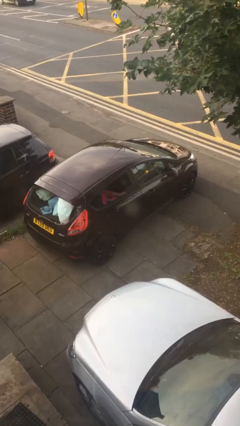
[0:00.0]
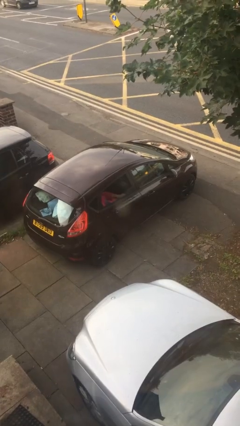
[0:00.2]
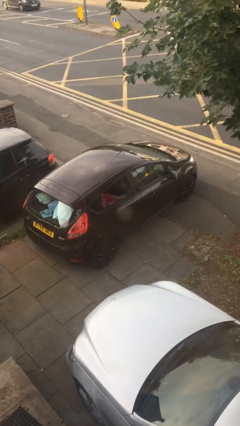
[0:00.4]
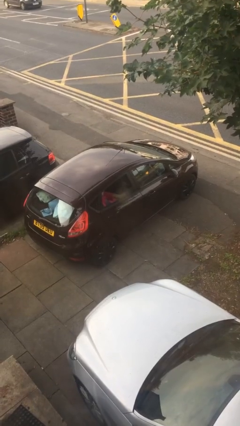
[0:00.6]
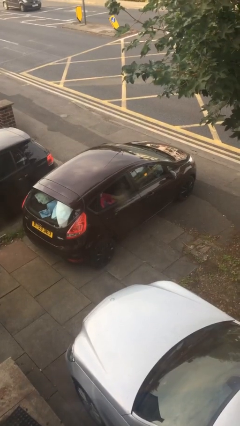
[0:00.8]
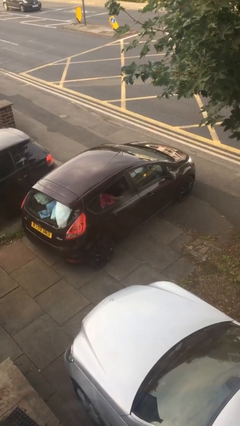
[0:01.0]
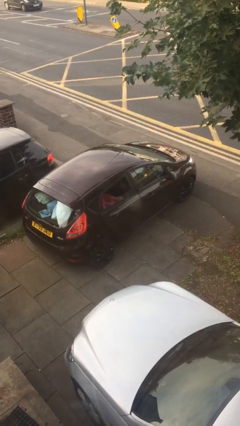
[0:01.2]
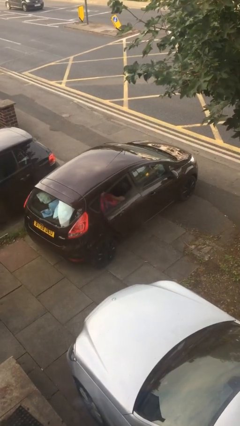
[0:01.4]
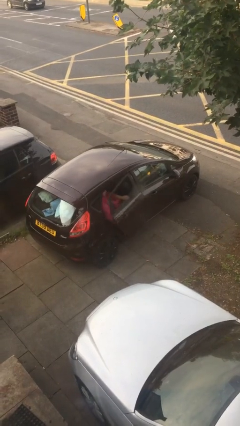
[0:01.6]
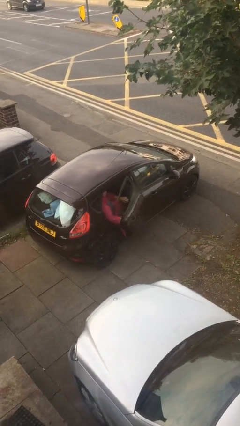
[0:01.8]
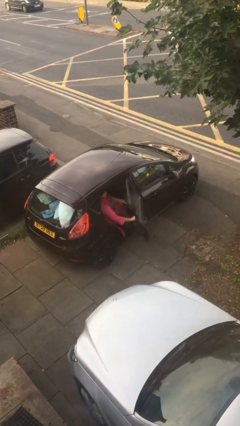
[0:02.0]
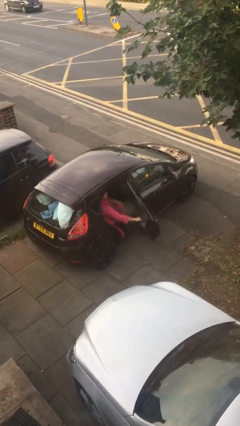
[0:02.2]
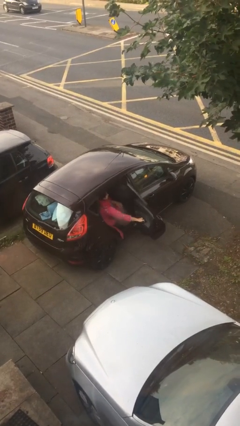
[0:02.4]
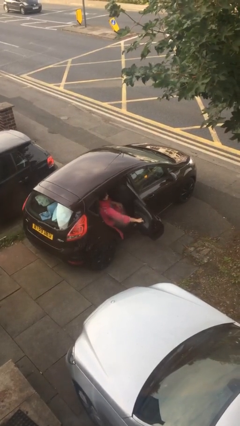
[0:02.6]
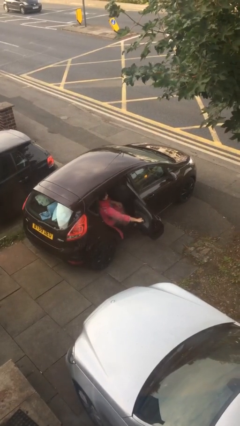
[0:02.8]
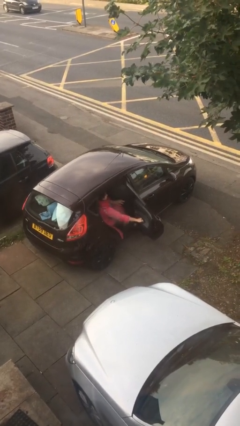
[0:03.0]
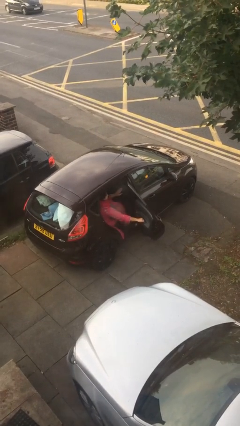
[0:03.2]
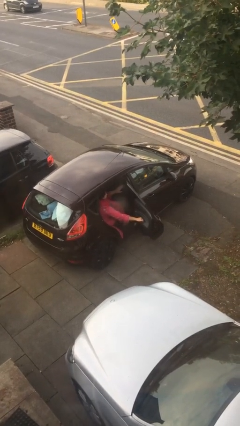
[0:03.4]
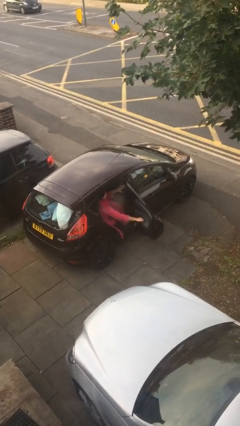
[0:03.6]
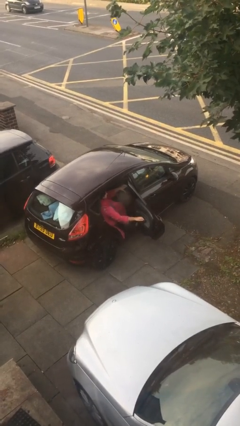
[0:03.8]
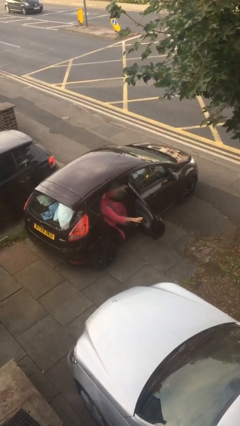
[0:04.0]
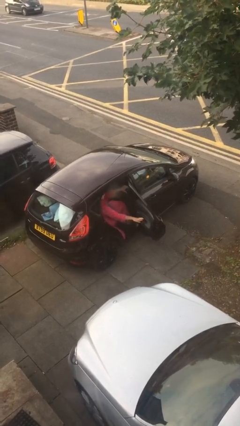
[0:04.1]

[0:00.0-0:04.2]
person opens car door

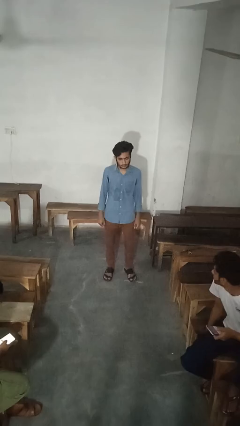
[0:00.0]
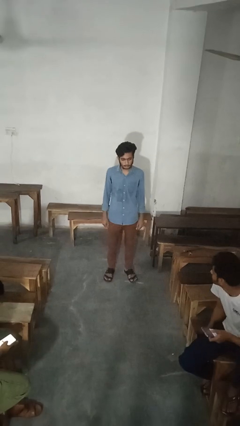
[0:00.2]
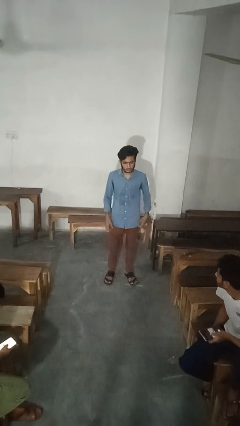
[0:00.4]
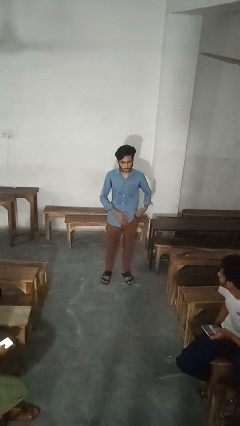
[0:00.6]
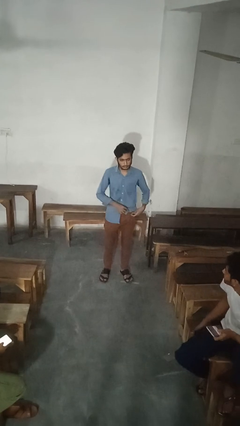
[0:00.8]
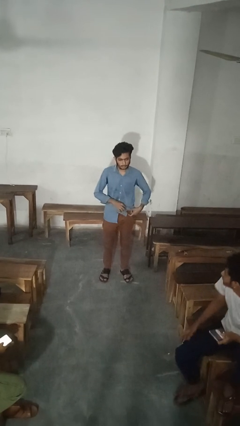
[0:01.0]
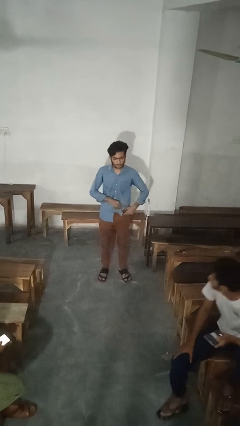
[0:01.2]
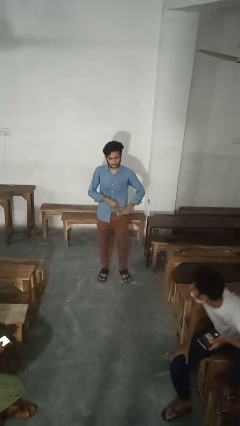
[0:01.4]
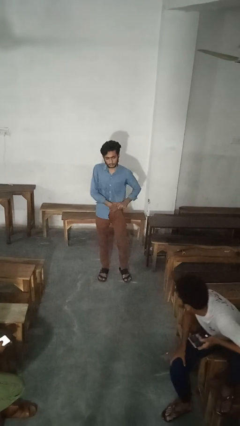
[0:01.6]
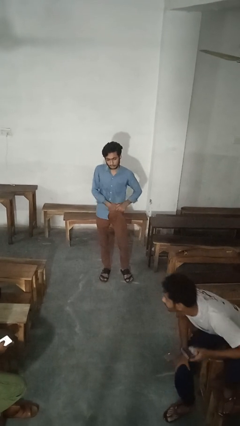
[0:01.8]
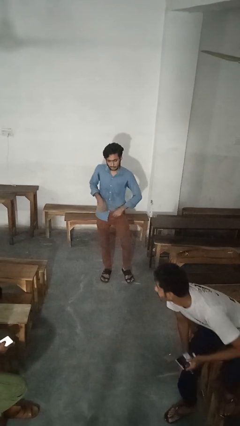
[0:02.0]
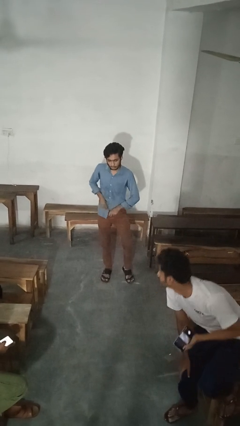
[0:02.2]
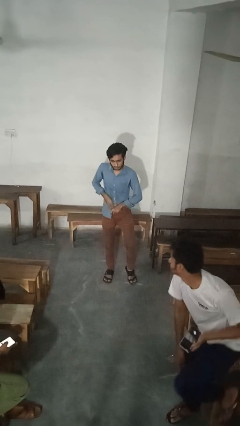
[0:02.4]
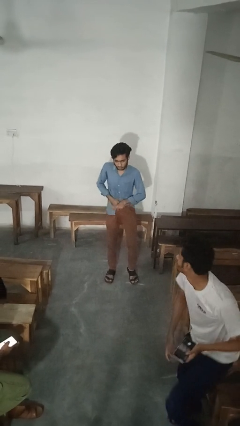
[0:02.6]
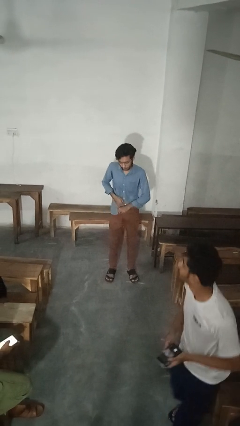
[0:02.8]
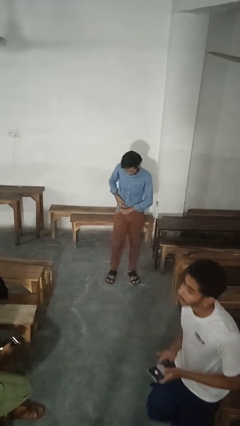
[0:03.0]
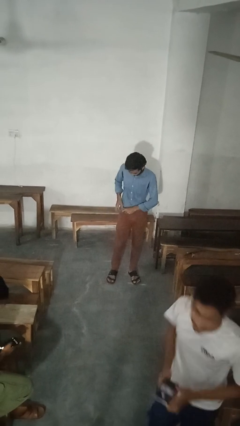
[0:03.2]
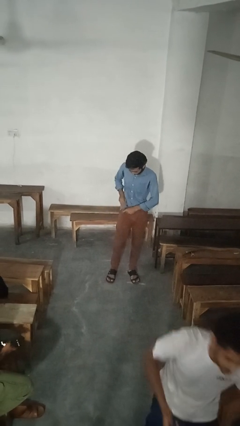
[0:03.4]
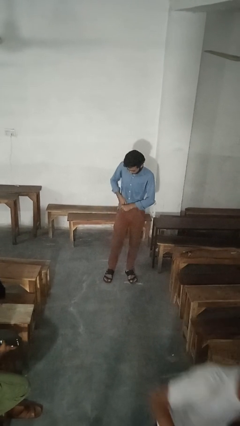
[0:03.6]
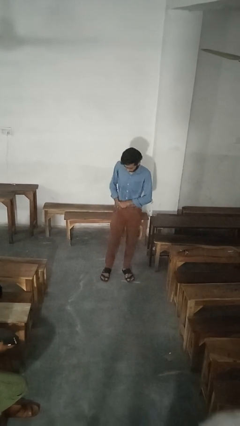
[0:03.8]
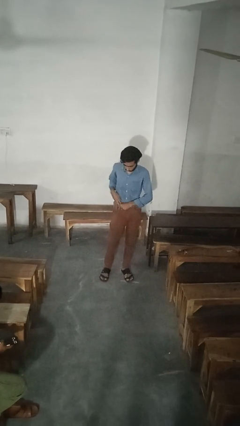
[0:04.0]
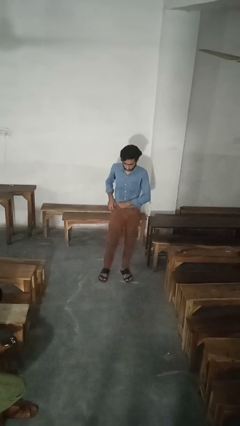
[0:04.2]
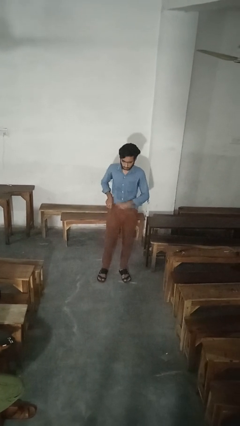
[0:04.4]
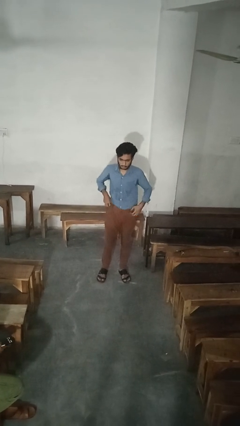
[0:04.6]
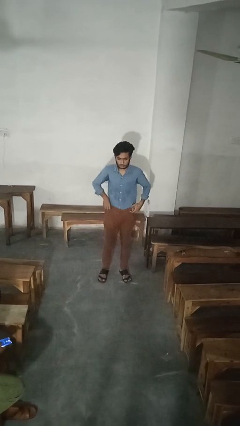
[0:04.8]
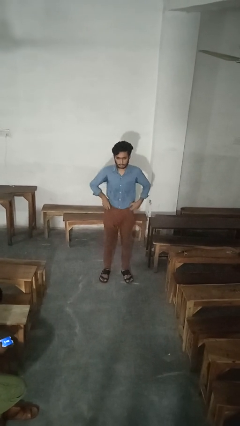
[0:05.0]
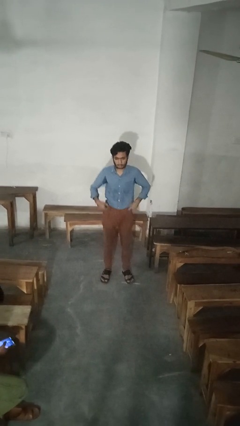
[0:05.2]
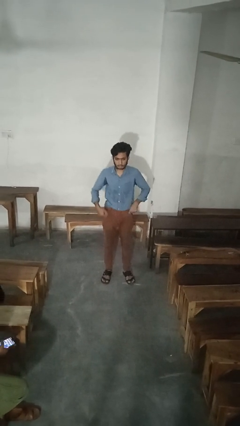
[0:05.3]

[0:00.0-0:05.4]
person tucks in shirt

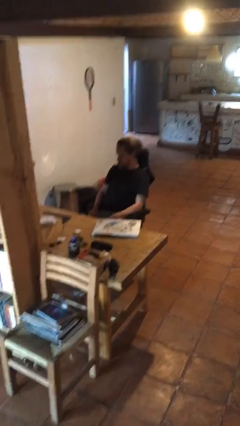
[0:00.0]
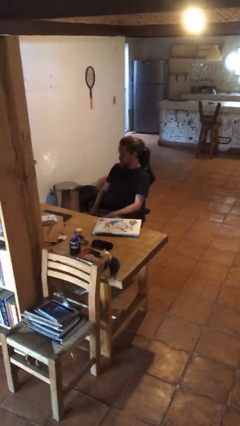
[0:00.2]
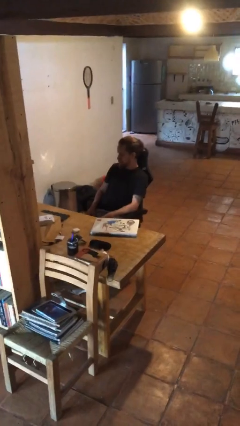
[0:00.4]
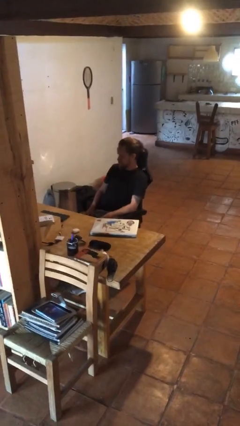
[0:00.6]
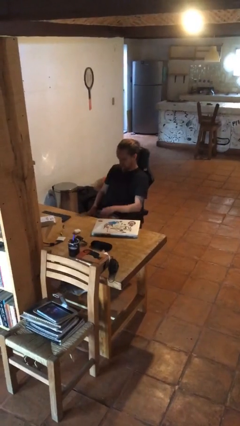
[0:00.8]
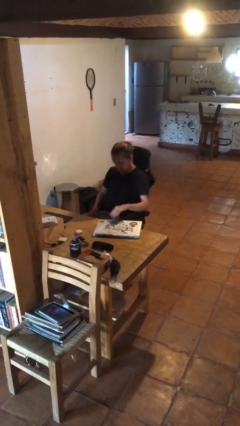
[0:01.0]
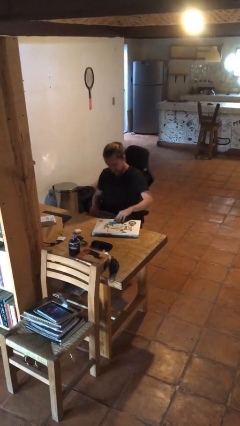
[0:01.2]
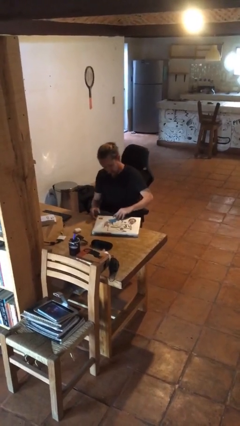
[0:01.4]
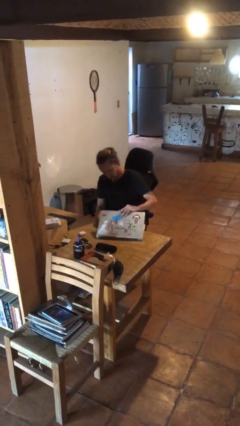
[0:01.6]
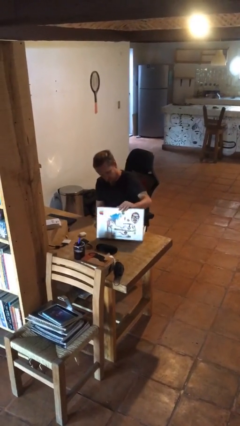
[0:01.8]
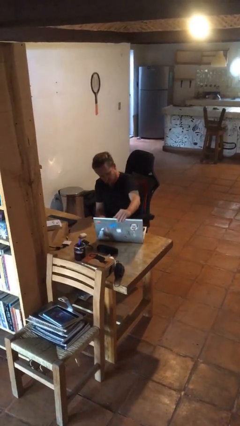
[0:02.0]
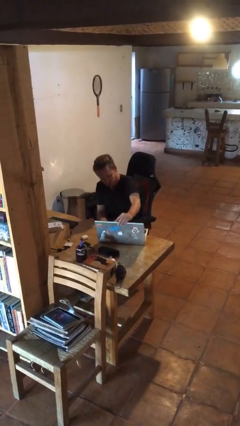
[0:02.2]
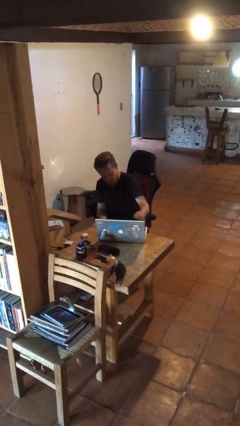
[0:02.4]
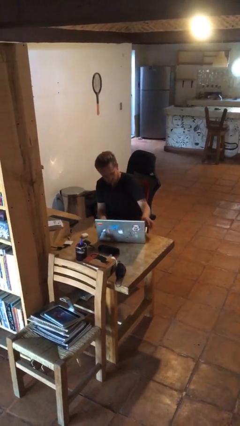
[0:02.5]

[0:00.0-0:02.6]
person opens laptop

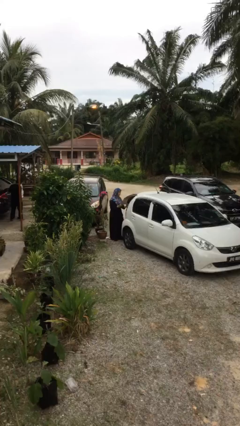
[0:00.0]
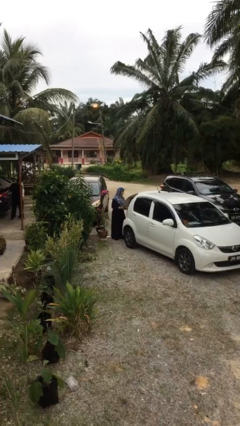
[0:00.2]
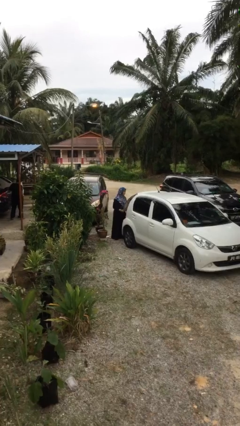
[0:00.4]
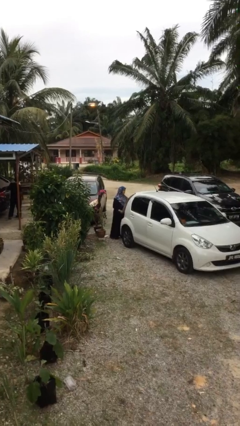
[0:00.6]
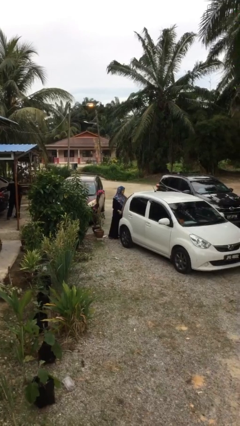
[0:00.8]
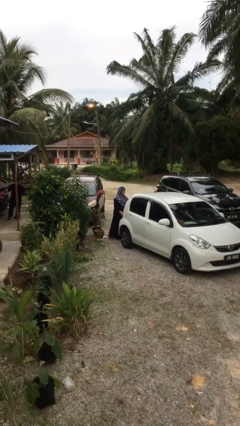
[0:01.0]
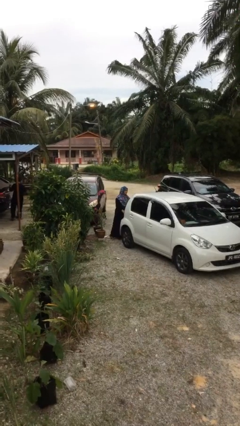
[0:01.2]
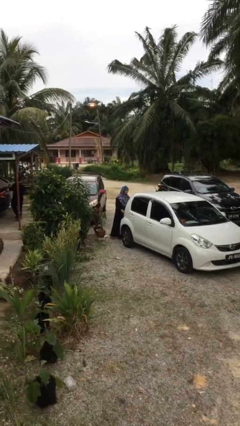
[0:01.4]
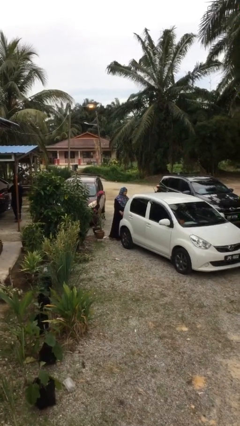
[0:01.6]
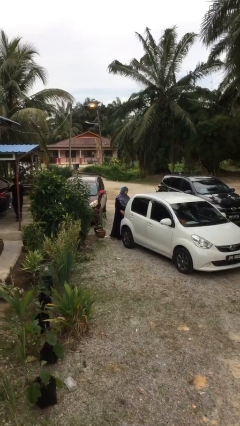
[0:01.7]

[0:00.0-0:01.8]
person closes car trunk

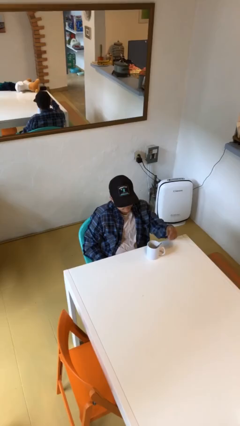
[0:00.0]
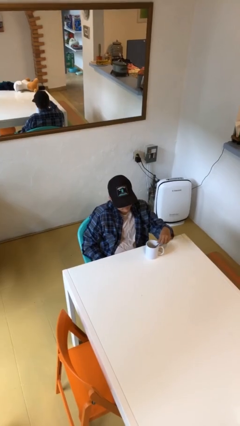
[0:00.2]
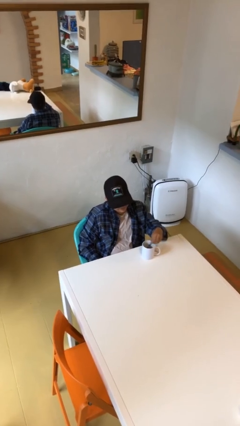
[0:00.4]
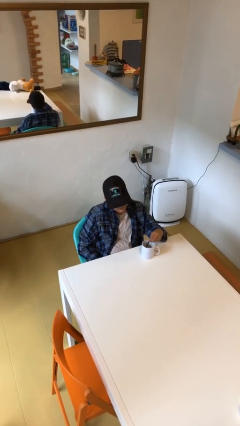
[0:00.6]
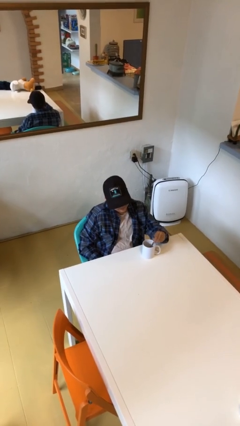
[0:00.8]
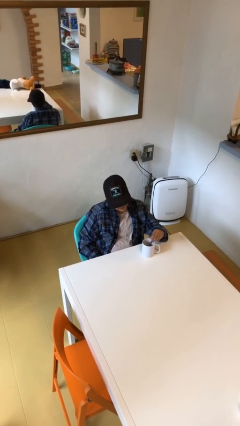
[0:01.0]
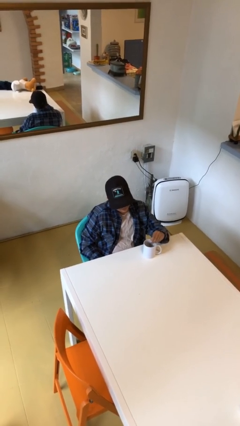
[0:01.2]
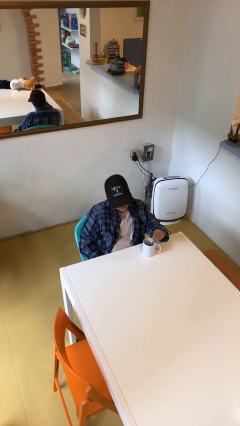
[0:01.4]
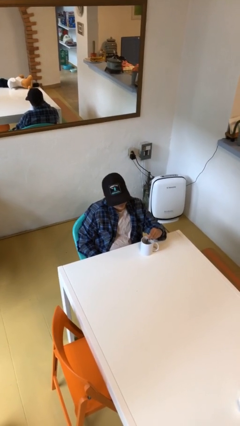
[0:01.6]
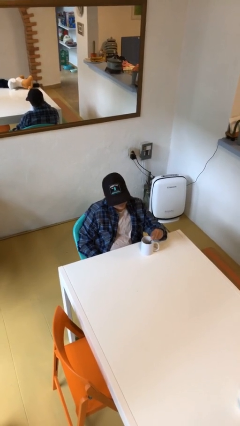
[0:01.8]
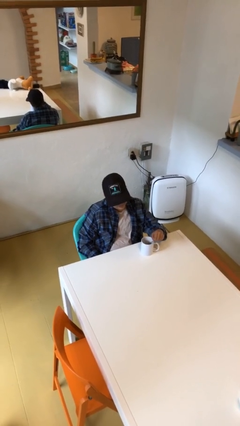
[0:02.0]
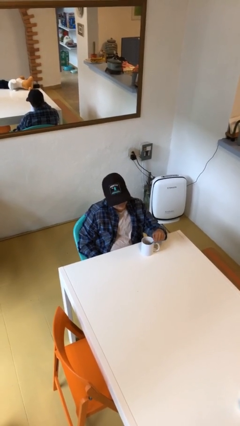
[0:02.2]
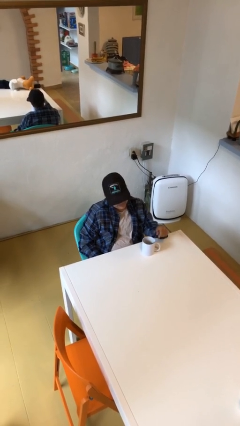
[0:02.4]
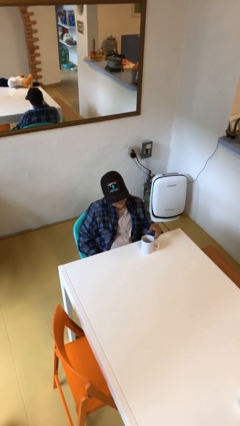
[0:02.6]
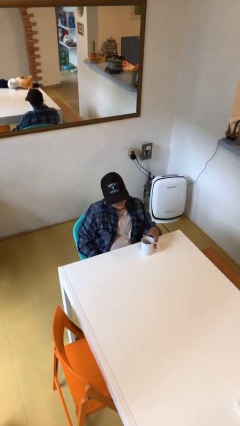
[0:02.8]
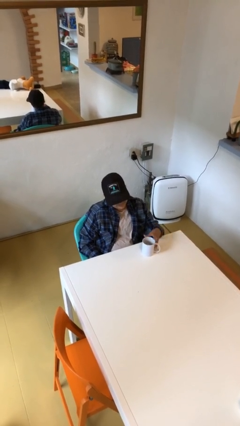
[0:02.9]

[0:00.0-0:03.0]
person stirs mug
